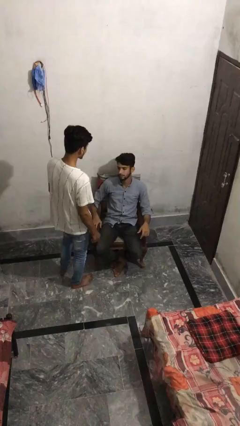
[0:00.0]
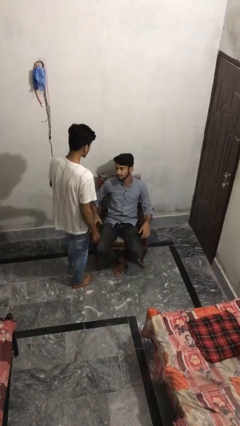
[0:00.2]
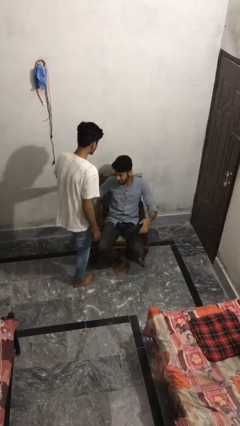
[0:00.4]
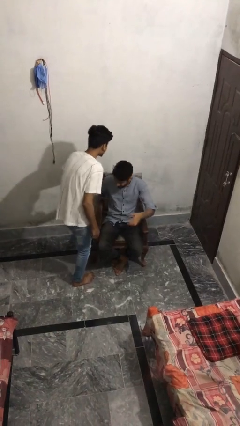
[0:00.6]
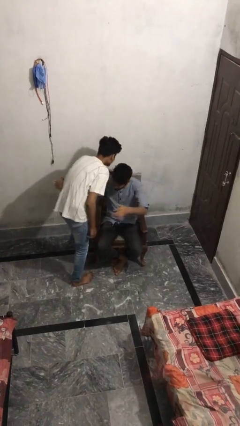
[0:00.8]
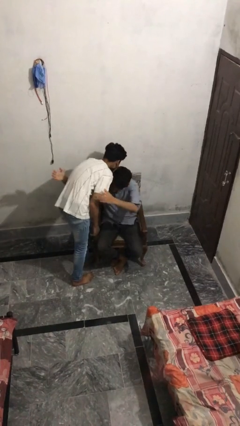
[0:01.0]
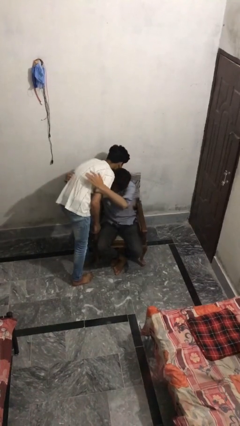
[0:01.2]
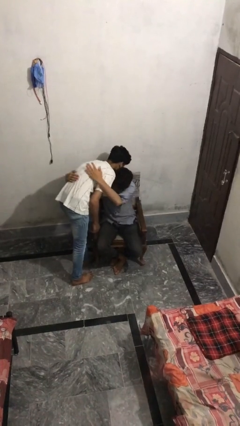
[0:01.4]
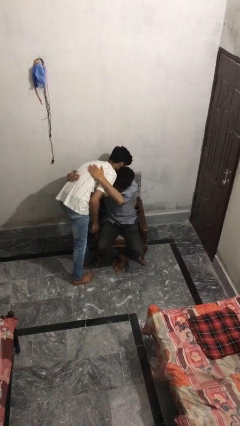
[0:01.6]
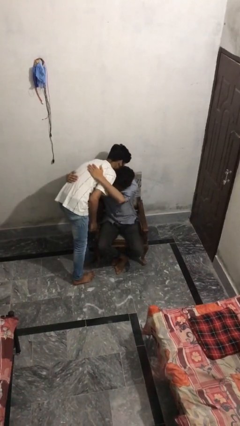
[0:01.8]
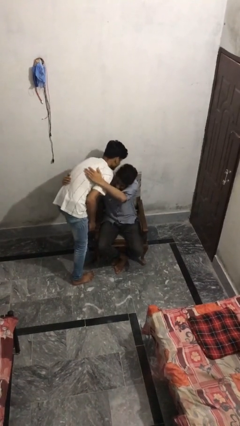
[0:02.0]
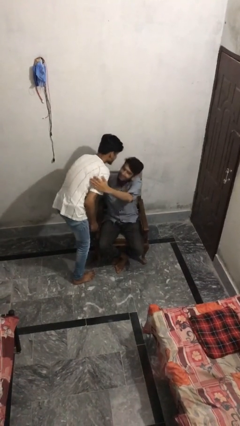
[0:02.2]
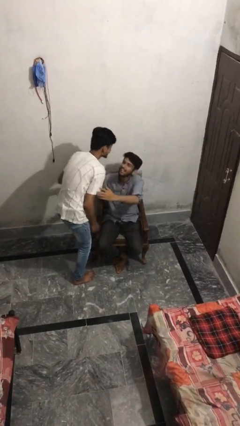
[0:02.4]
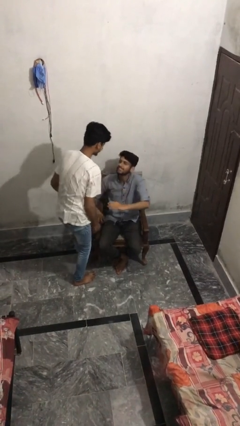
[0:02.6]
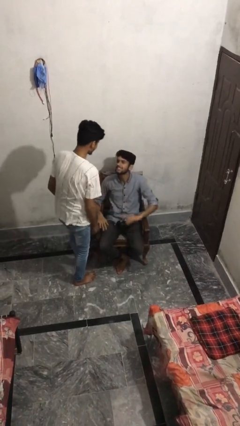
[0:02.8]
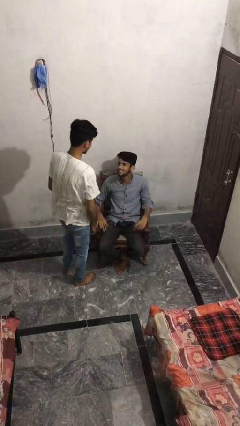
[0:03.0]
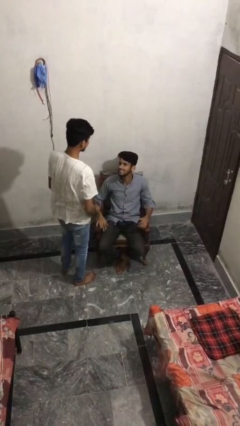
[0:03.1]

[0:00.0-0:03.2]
person embraces person

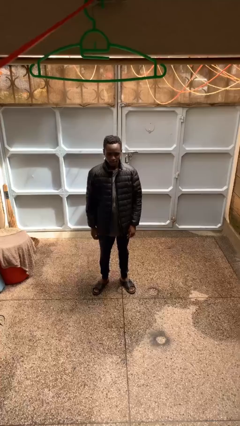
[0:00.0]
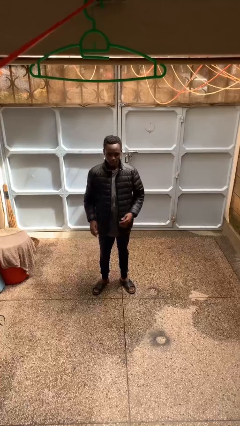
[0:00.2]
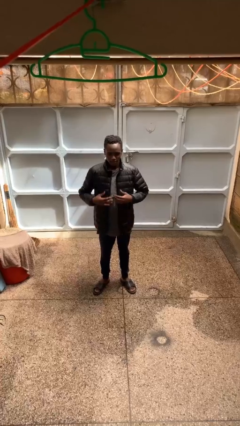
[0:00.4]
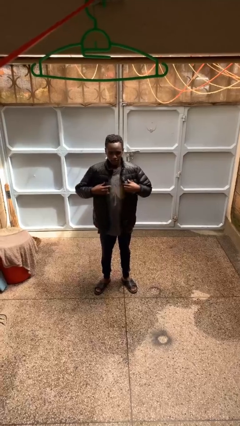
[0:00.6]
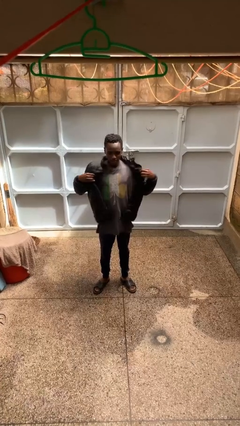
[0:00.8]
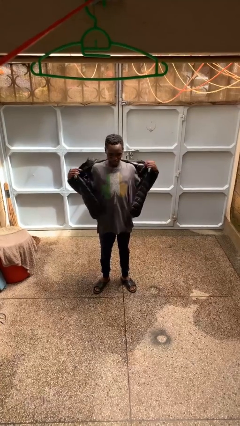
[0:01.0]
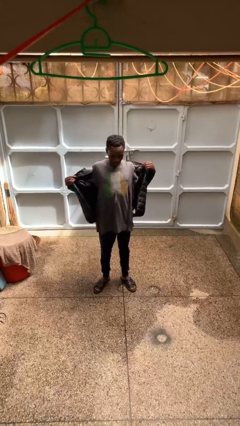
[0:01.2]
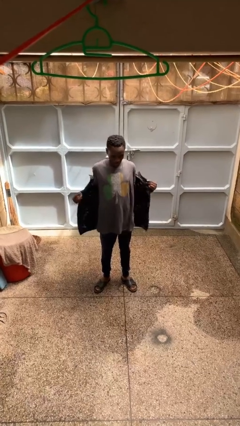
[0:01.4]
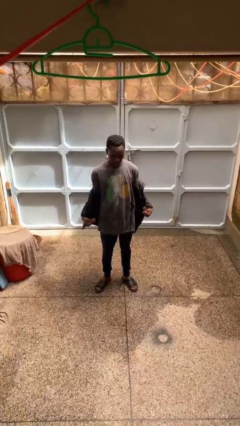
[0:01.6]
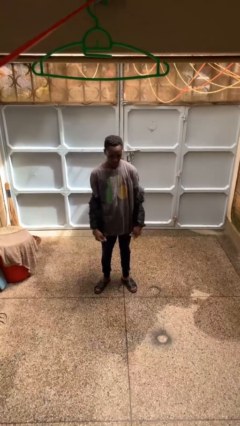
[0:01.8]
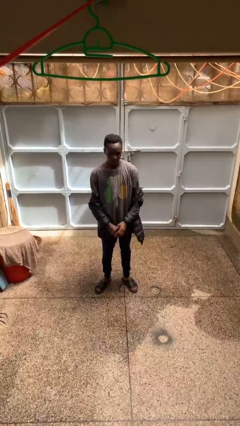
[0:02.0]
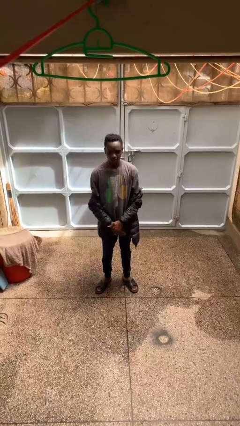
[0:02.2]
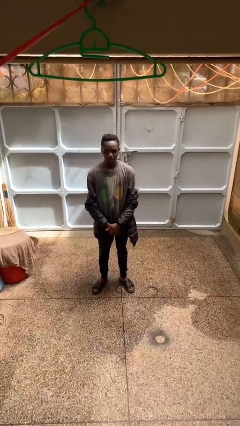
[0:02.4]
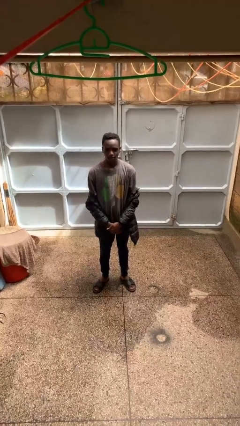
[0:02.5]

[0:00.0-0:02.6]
person takes off jacket

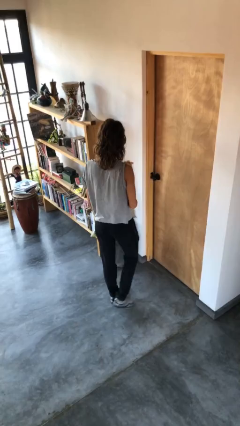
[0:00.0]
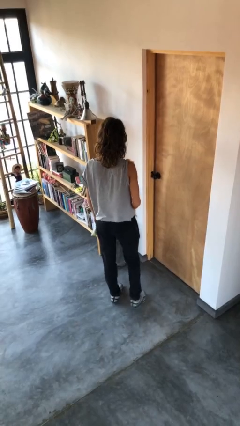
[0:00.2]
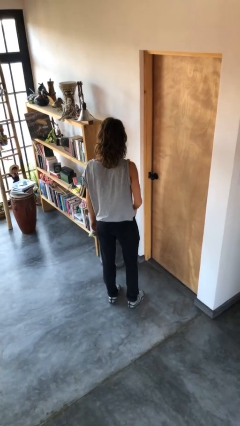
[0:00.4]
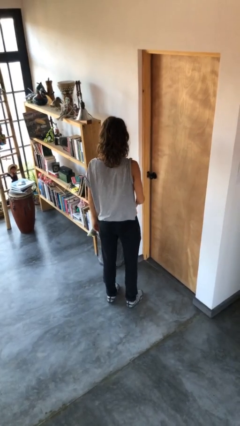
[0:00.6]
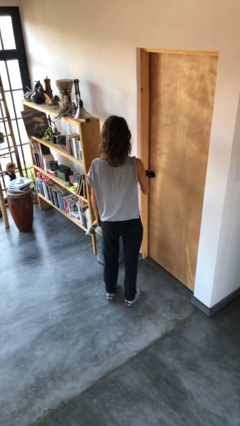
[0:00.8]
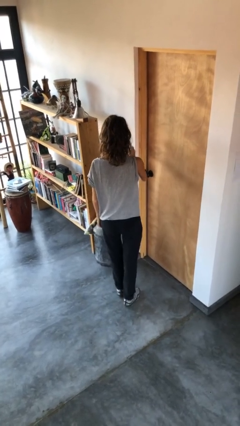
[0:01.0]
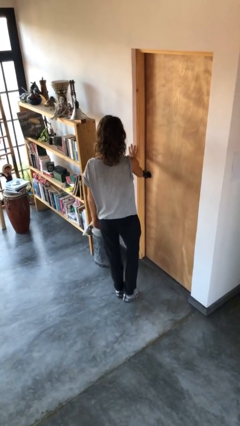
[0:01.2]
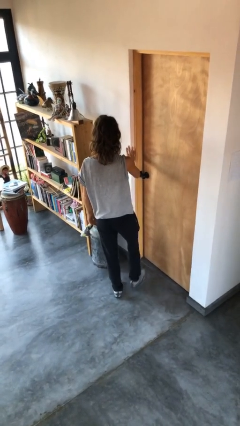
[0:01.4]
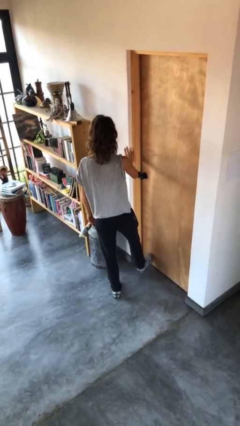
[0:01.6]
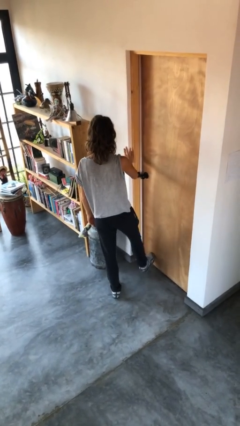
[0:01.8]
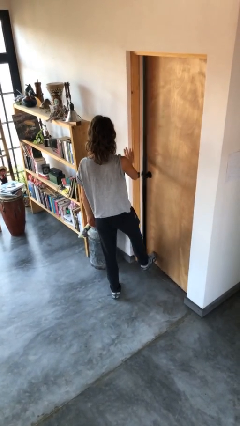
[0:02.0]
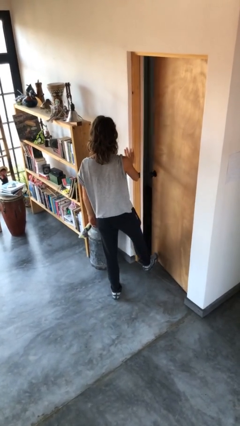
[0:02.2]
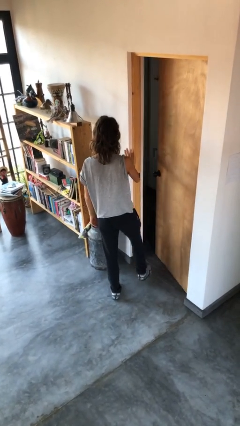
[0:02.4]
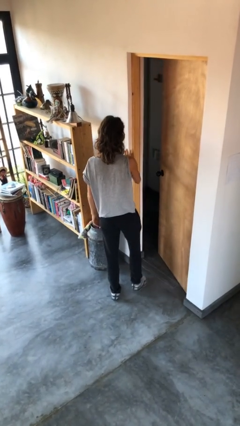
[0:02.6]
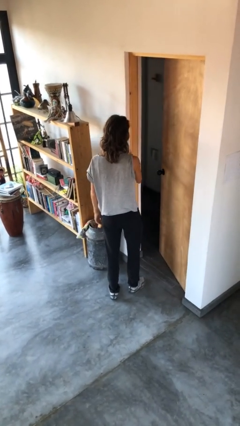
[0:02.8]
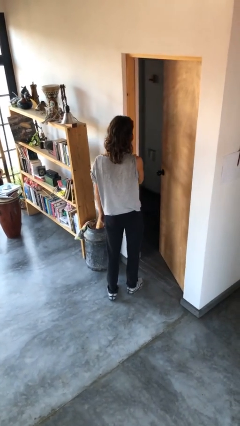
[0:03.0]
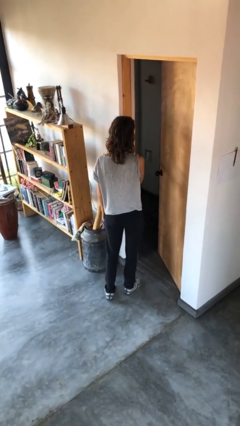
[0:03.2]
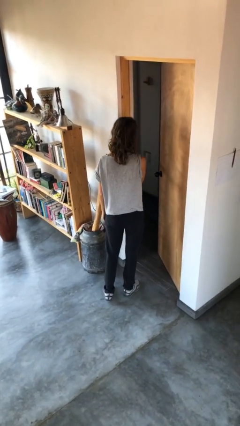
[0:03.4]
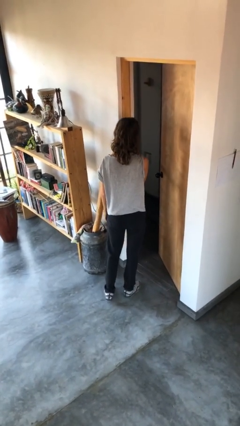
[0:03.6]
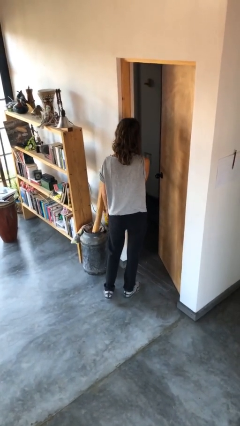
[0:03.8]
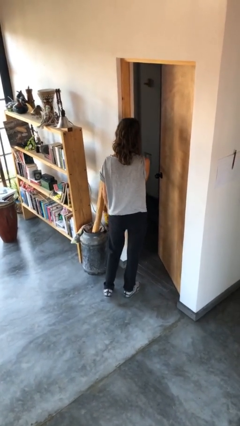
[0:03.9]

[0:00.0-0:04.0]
person opens facility door

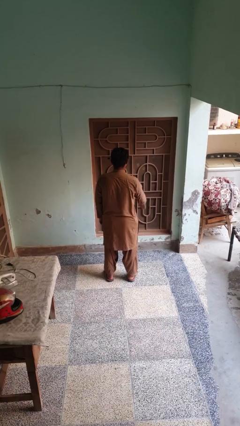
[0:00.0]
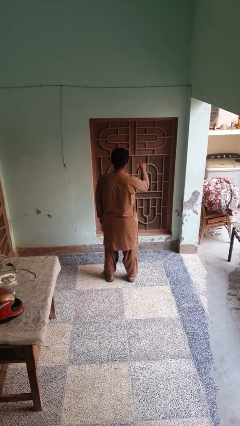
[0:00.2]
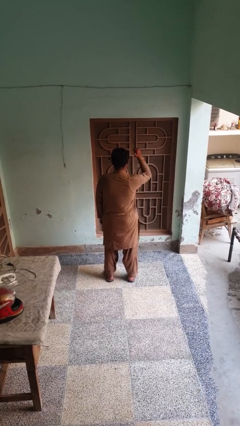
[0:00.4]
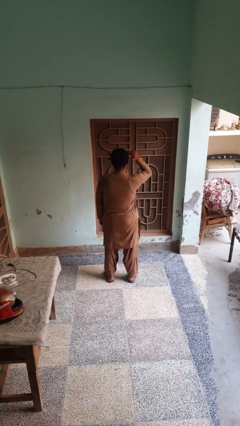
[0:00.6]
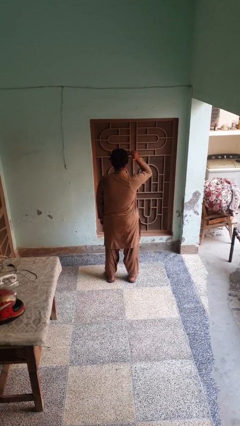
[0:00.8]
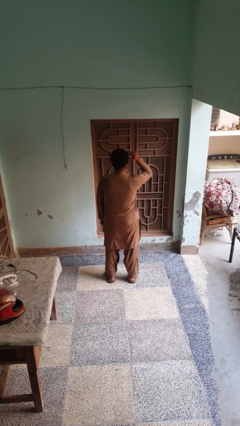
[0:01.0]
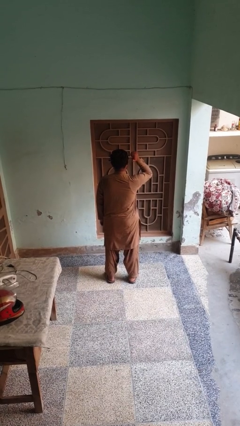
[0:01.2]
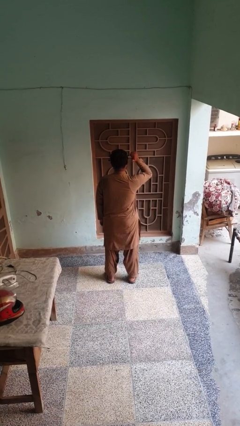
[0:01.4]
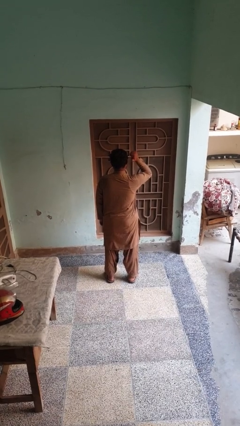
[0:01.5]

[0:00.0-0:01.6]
person gestures behind me

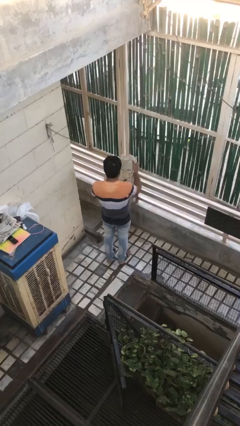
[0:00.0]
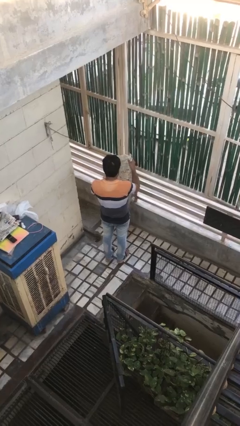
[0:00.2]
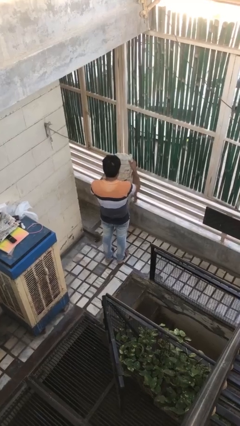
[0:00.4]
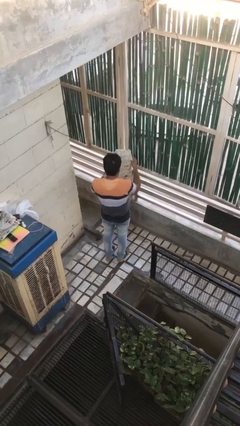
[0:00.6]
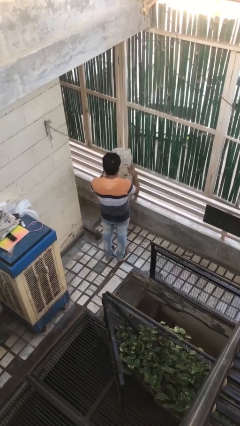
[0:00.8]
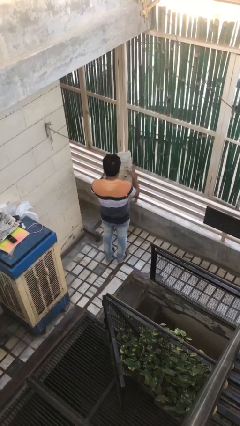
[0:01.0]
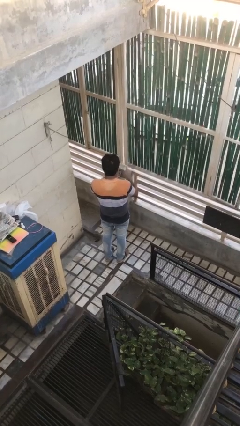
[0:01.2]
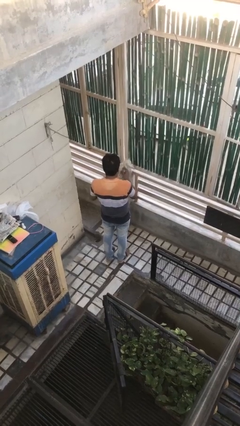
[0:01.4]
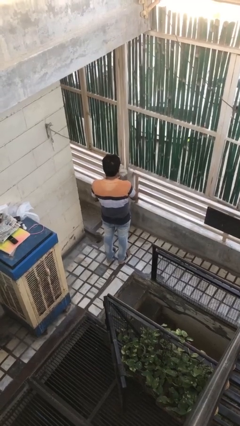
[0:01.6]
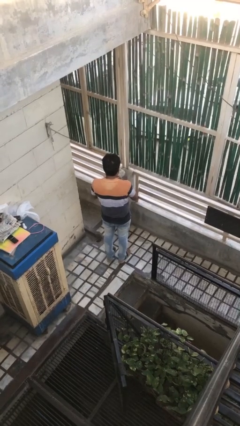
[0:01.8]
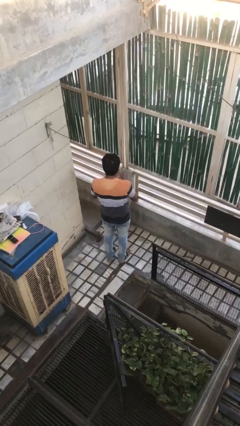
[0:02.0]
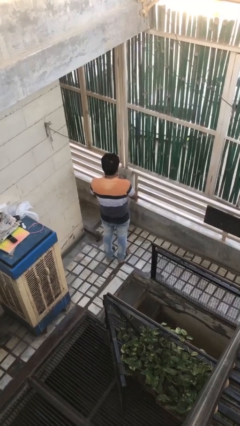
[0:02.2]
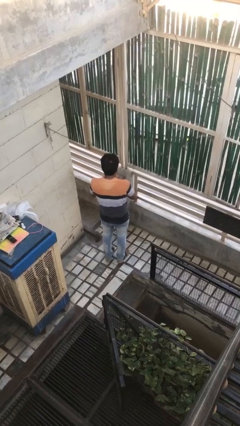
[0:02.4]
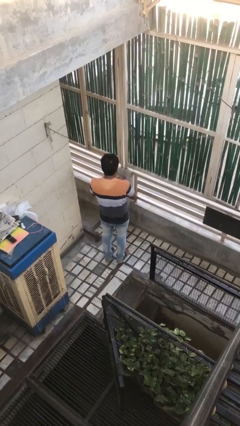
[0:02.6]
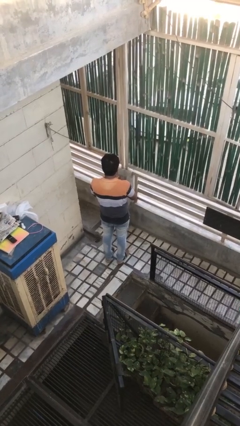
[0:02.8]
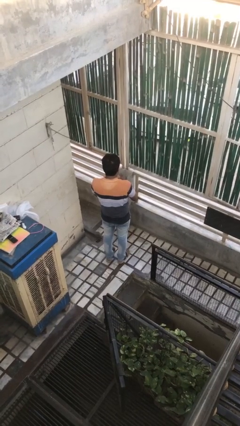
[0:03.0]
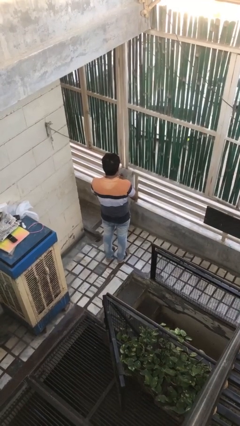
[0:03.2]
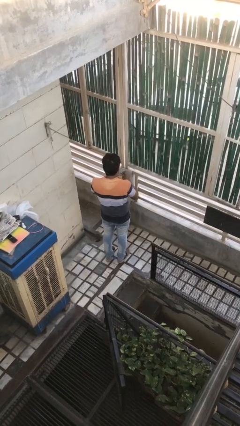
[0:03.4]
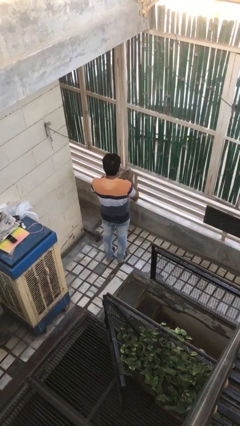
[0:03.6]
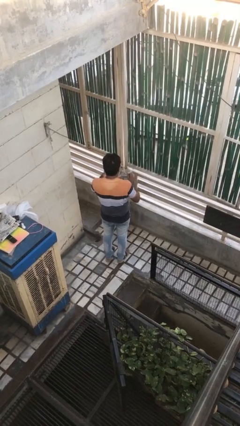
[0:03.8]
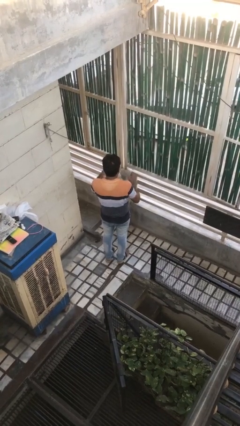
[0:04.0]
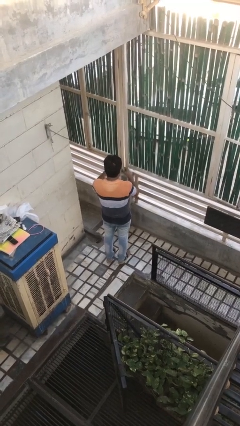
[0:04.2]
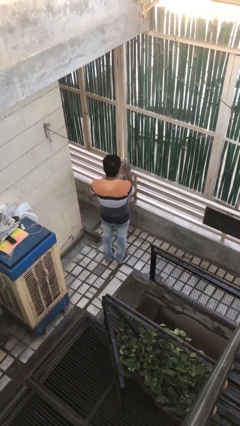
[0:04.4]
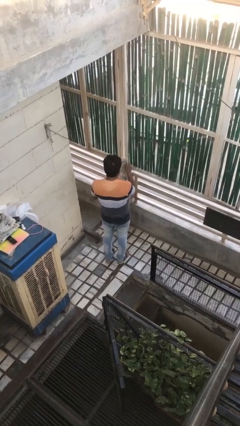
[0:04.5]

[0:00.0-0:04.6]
person crumples paper

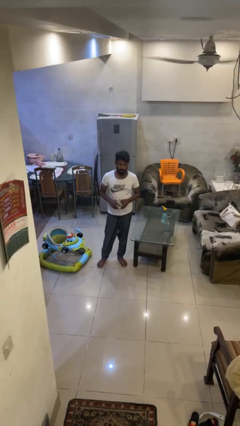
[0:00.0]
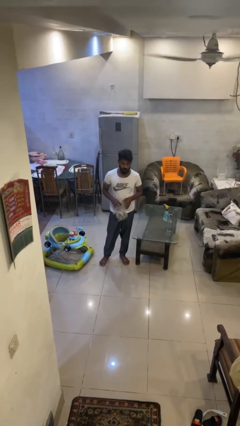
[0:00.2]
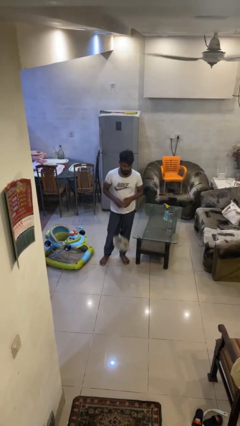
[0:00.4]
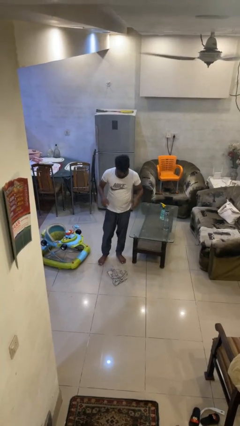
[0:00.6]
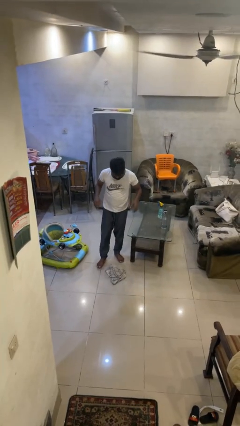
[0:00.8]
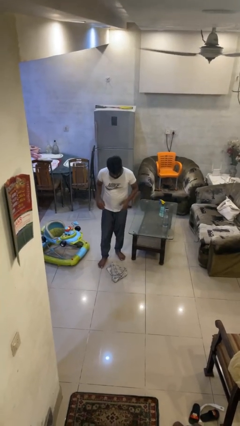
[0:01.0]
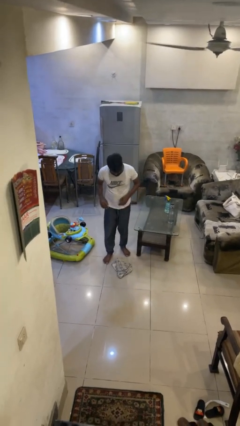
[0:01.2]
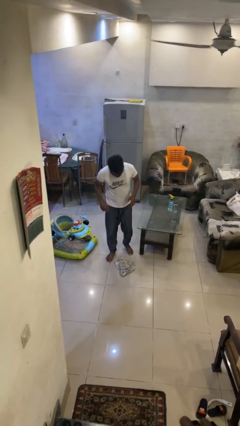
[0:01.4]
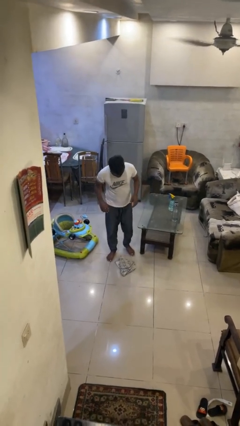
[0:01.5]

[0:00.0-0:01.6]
person drops object
